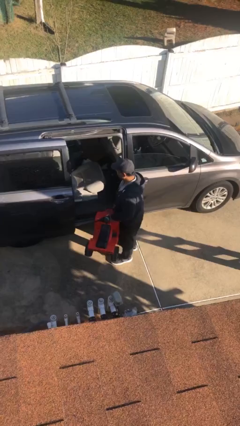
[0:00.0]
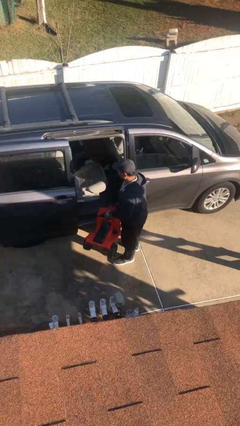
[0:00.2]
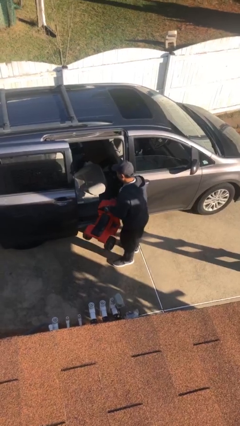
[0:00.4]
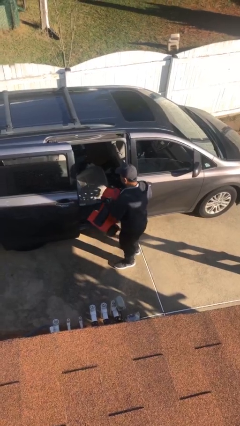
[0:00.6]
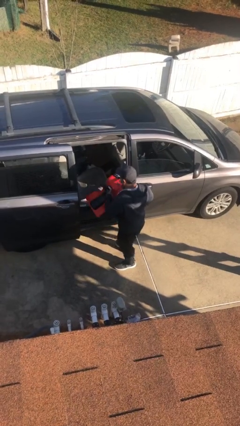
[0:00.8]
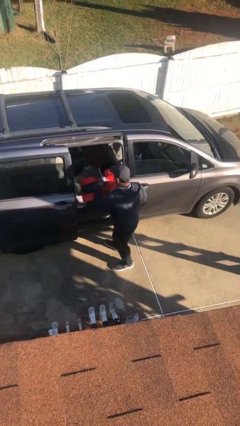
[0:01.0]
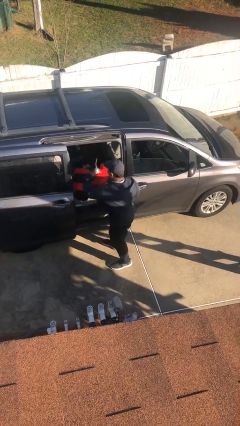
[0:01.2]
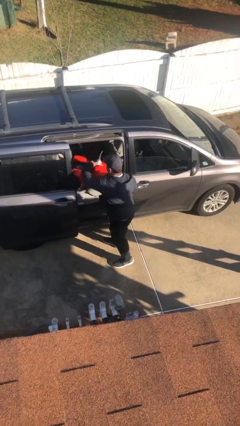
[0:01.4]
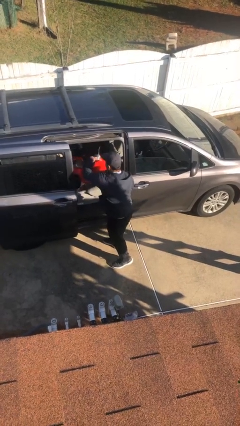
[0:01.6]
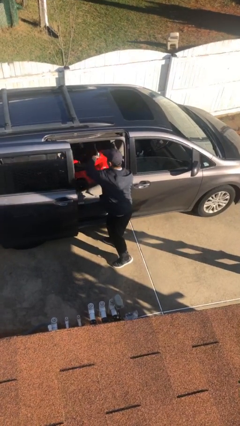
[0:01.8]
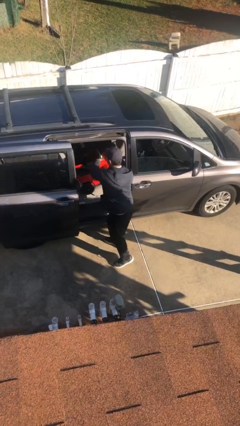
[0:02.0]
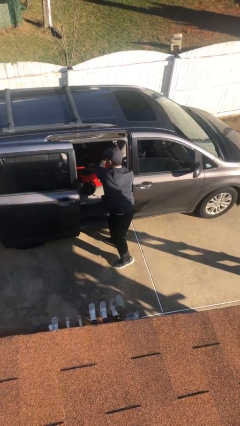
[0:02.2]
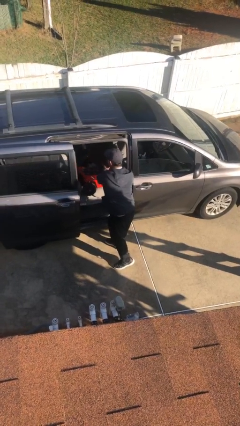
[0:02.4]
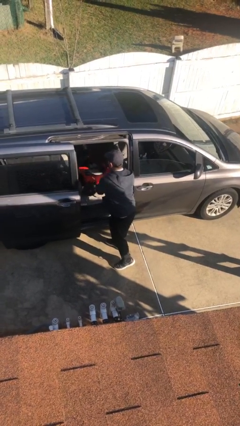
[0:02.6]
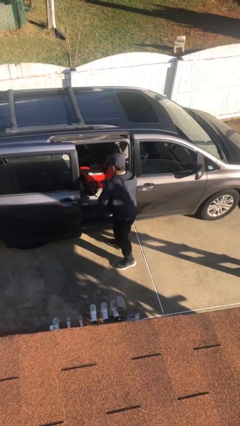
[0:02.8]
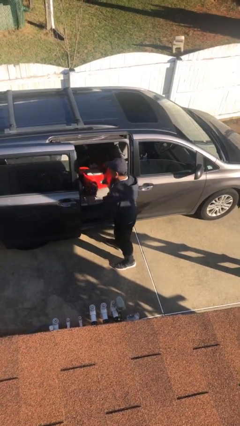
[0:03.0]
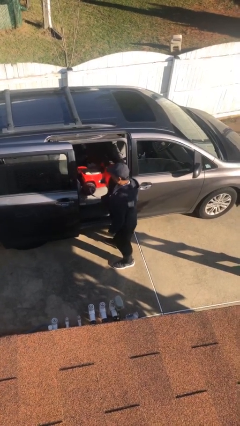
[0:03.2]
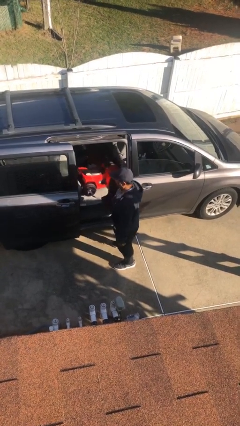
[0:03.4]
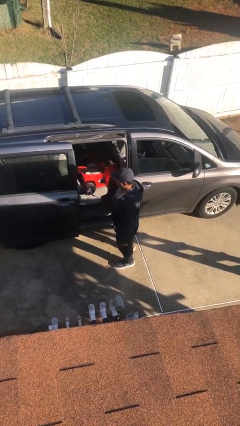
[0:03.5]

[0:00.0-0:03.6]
person loads car

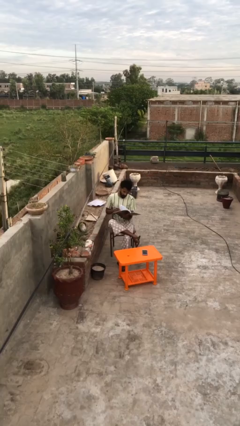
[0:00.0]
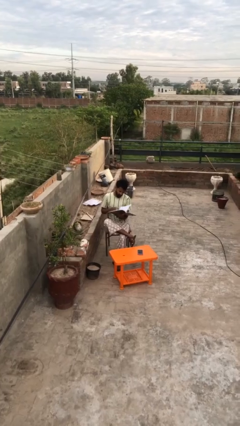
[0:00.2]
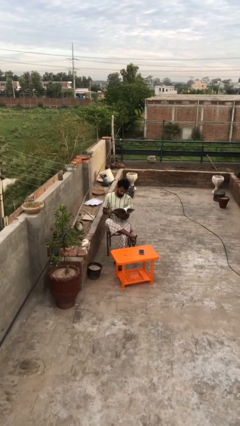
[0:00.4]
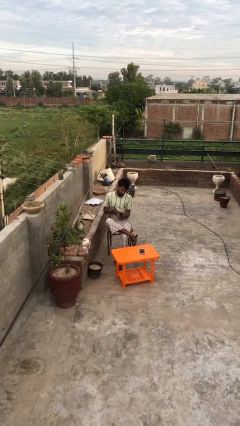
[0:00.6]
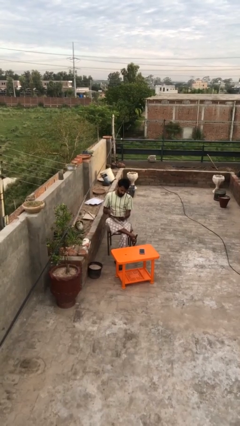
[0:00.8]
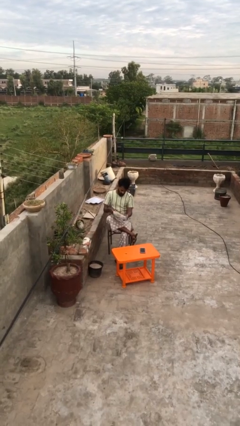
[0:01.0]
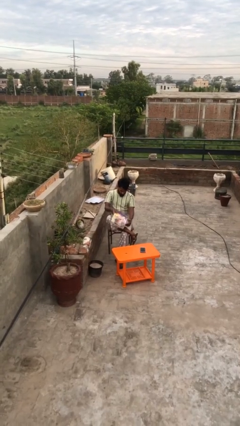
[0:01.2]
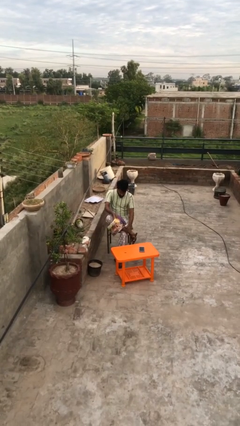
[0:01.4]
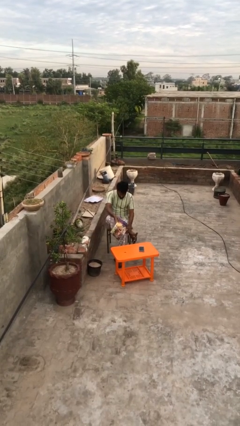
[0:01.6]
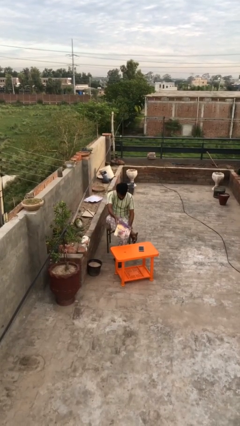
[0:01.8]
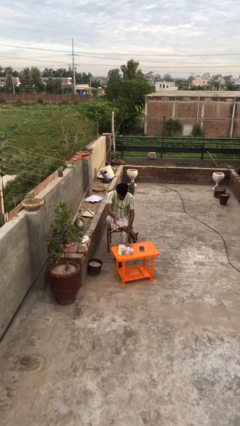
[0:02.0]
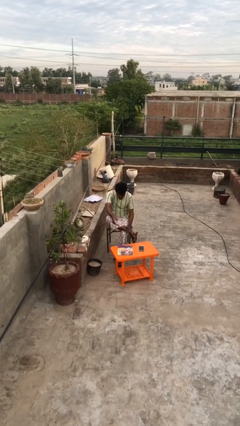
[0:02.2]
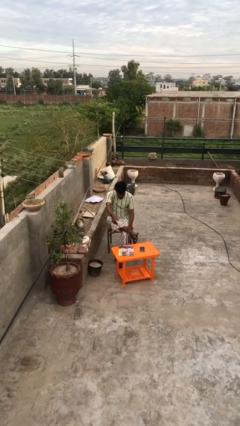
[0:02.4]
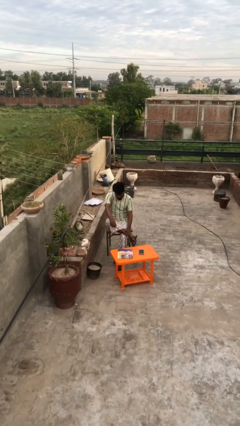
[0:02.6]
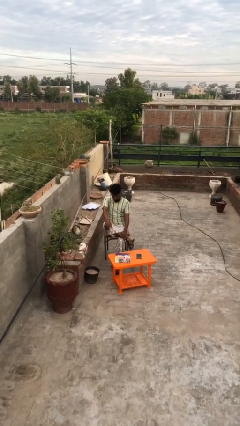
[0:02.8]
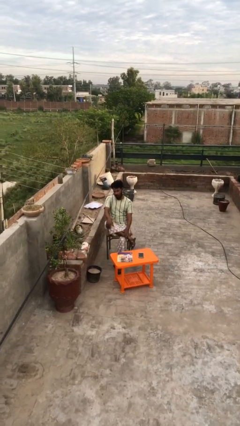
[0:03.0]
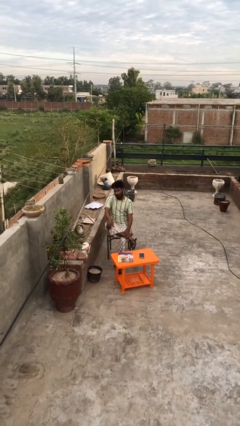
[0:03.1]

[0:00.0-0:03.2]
person puts down object on table

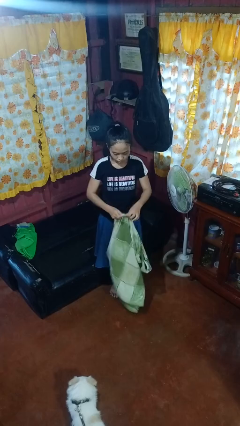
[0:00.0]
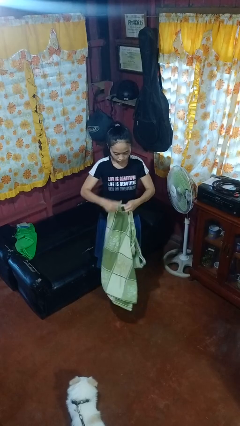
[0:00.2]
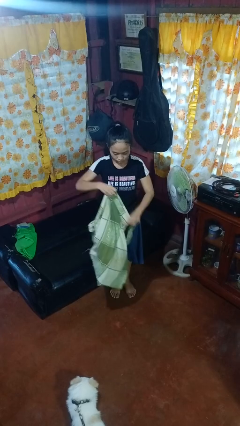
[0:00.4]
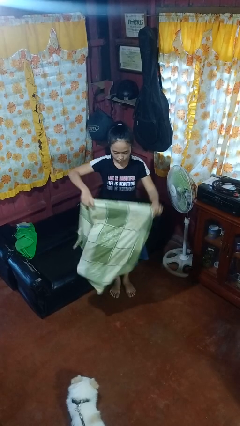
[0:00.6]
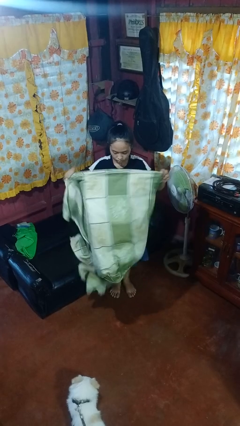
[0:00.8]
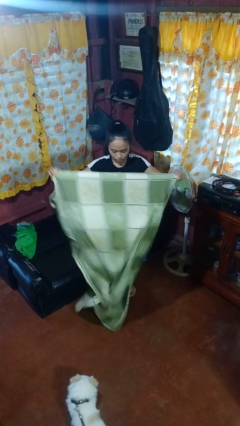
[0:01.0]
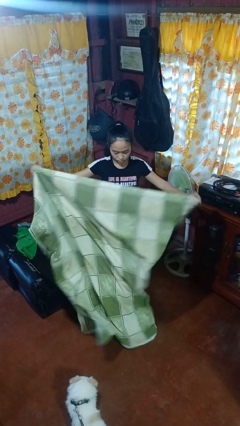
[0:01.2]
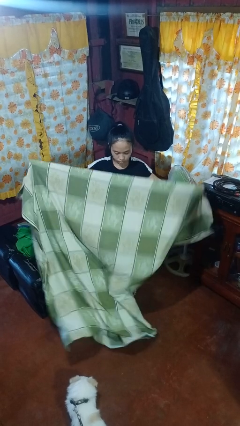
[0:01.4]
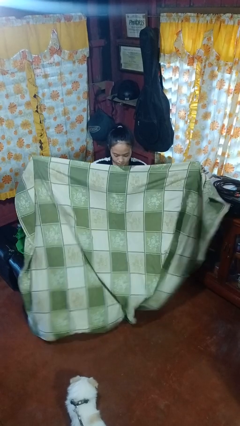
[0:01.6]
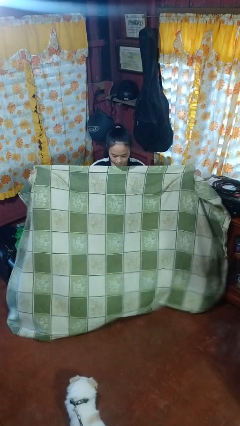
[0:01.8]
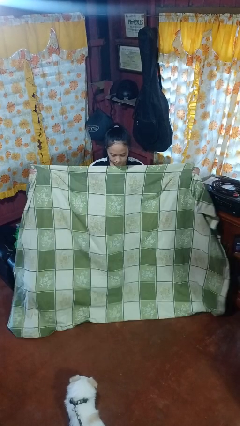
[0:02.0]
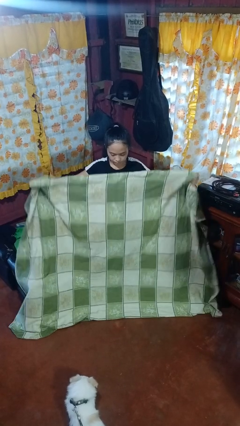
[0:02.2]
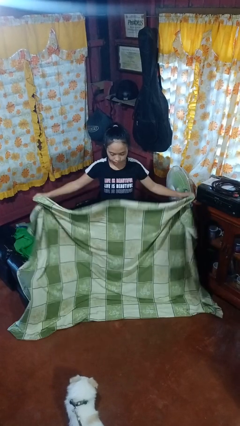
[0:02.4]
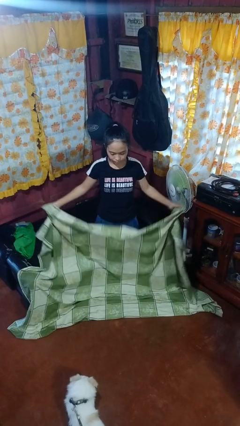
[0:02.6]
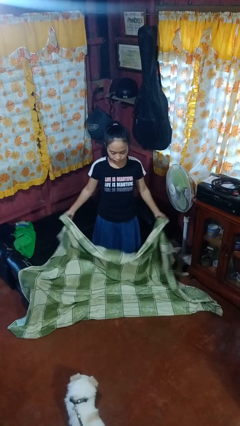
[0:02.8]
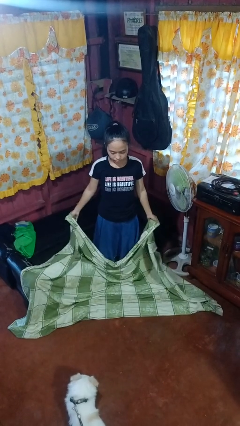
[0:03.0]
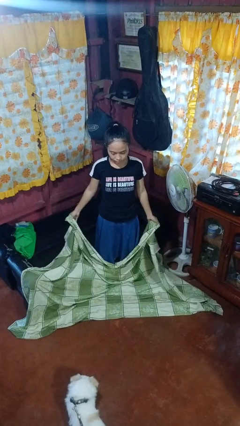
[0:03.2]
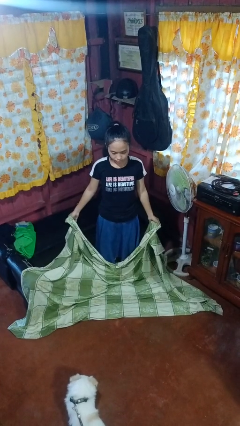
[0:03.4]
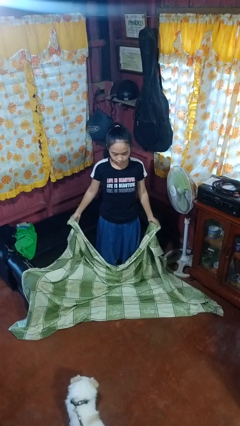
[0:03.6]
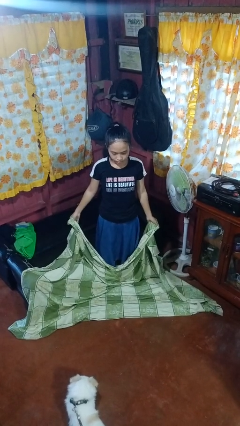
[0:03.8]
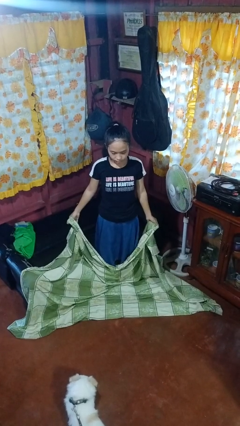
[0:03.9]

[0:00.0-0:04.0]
person unfolds blanket

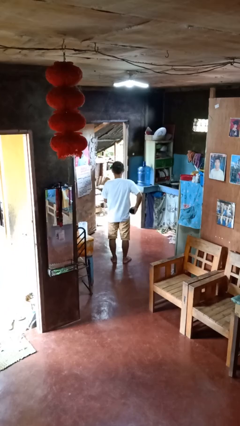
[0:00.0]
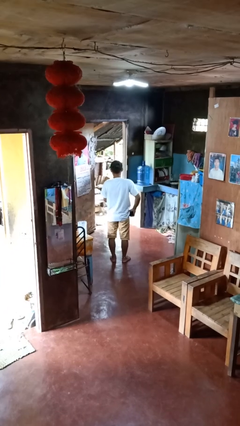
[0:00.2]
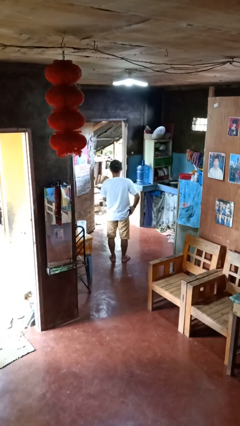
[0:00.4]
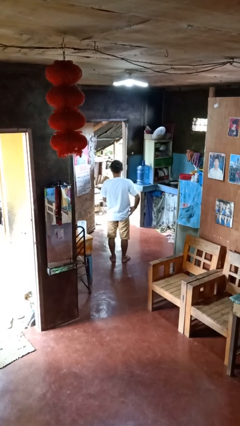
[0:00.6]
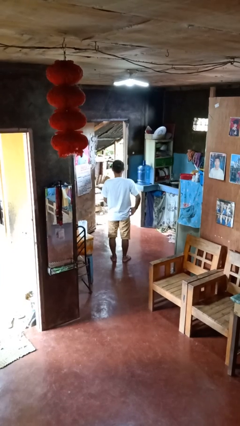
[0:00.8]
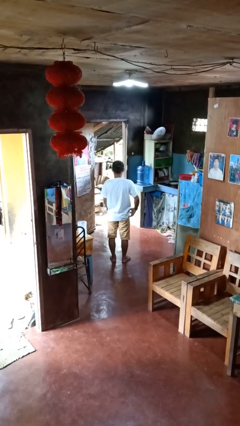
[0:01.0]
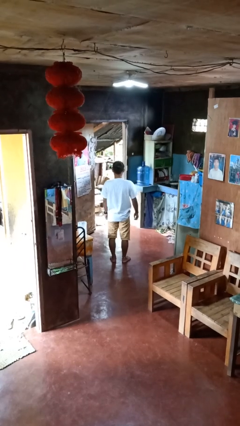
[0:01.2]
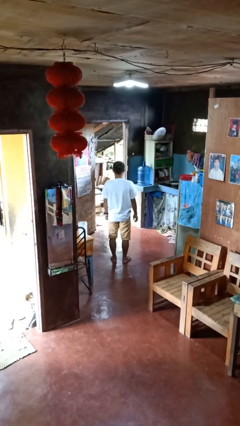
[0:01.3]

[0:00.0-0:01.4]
person puts phone into pocket

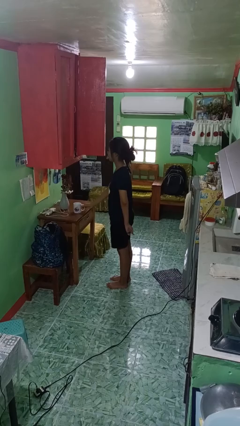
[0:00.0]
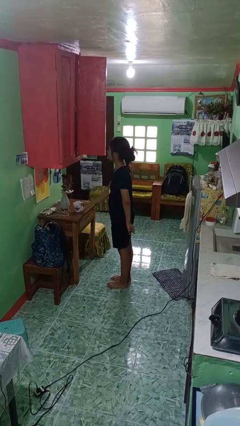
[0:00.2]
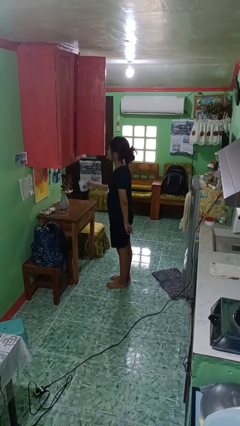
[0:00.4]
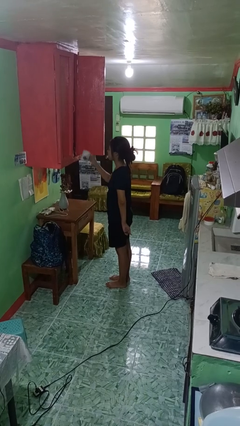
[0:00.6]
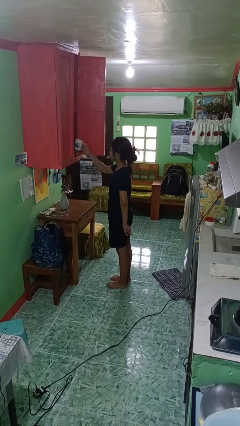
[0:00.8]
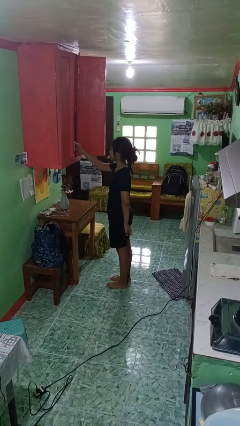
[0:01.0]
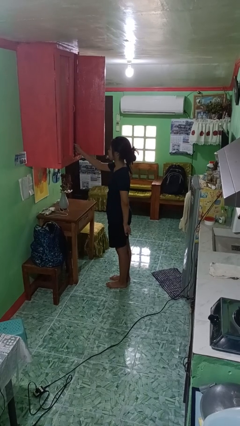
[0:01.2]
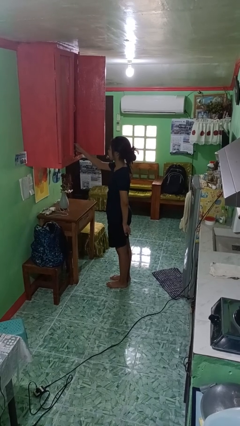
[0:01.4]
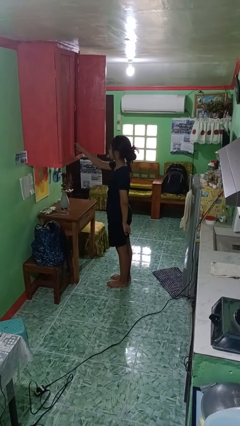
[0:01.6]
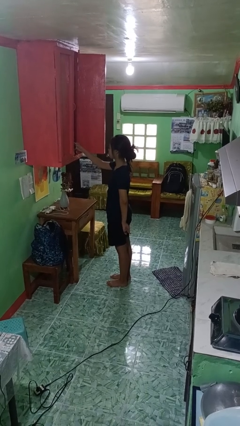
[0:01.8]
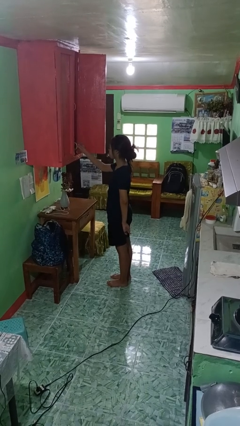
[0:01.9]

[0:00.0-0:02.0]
person puts object in cabinet

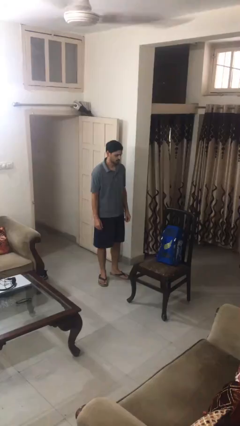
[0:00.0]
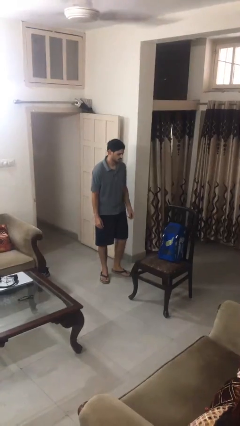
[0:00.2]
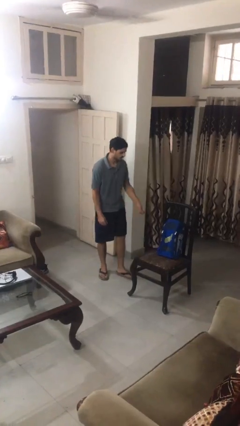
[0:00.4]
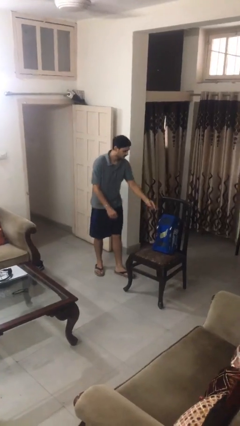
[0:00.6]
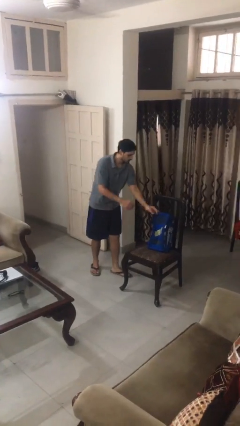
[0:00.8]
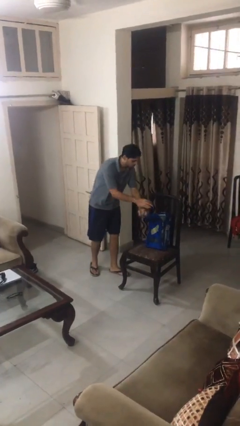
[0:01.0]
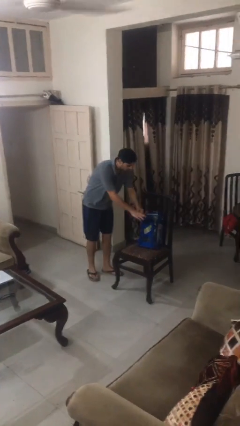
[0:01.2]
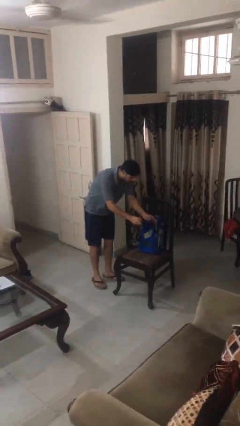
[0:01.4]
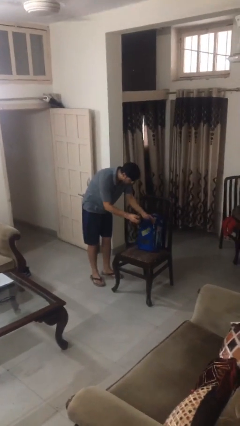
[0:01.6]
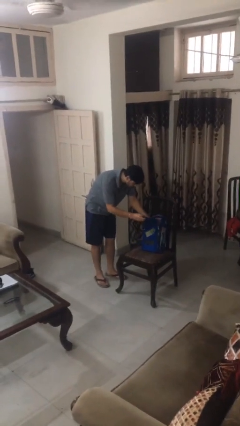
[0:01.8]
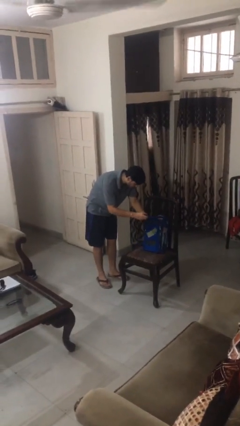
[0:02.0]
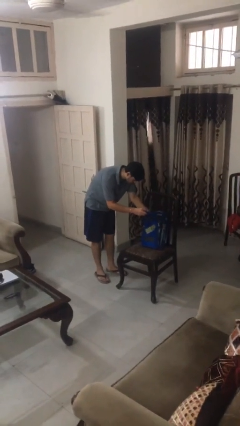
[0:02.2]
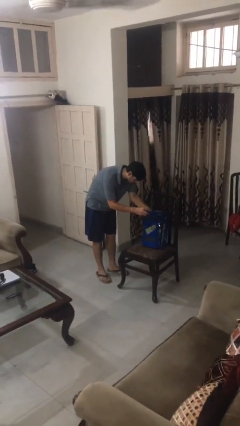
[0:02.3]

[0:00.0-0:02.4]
person searches in backpack

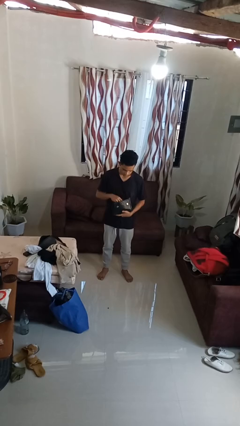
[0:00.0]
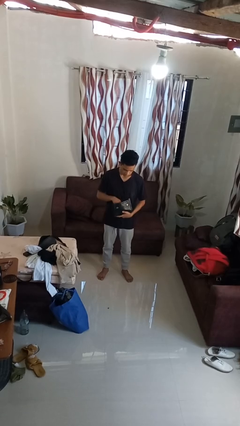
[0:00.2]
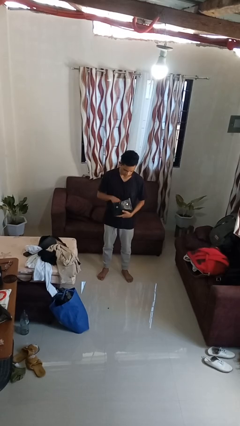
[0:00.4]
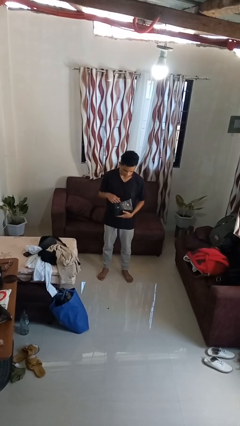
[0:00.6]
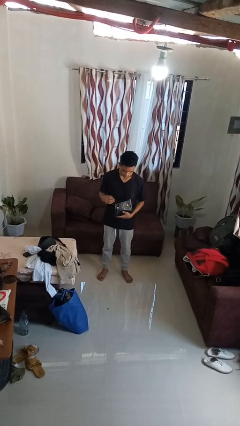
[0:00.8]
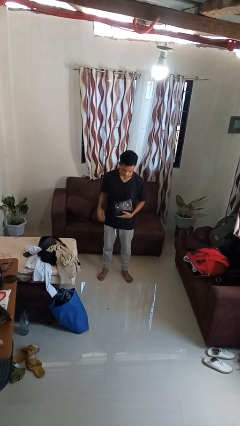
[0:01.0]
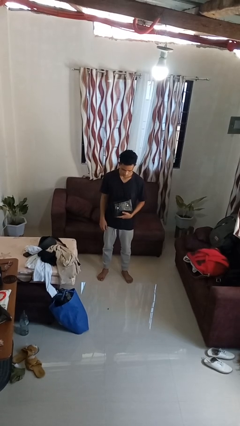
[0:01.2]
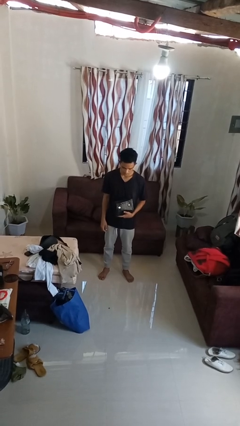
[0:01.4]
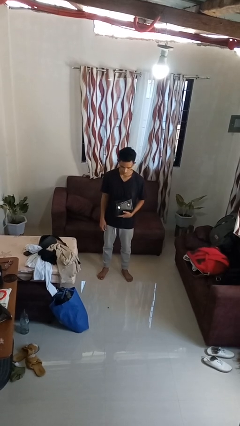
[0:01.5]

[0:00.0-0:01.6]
person puts object into purse
